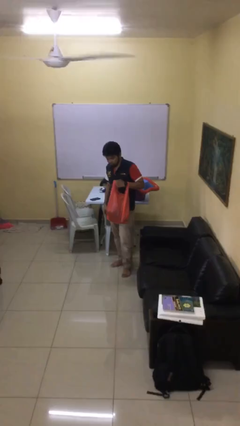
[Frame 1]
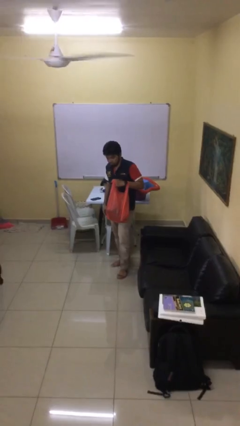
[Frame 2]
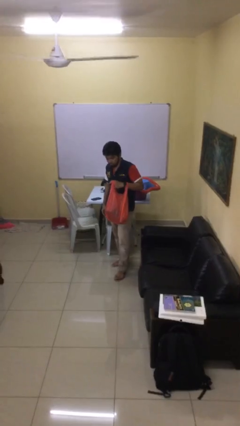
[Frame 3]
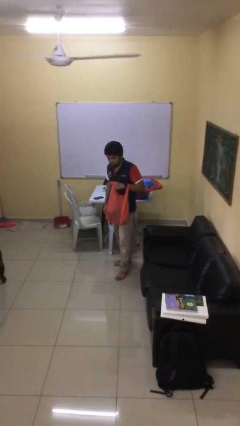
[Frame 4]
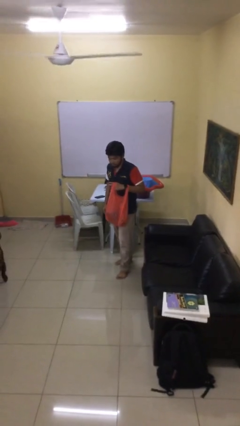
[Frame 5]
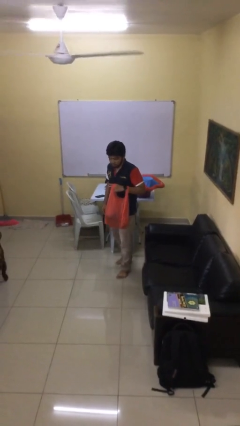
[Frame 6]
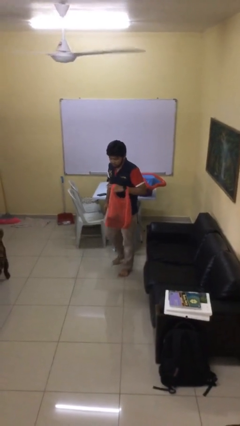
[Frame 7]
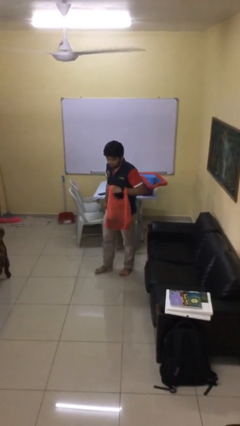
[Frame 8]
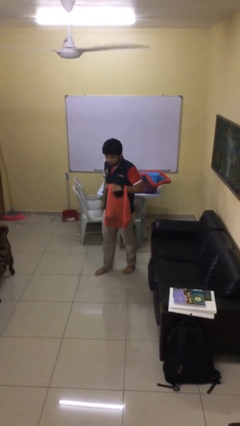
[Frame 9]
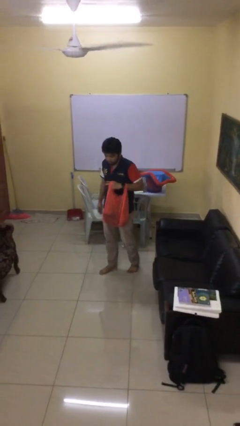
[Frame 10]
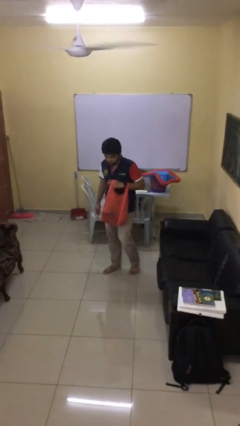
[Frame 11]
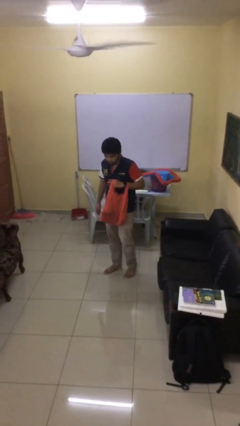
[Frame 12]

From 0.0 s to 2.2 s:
person carries groceries

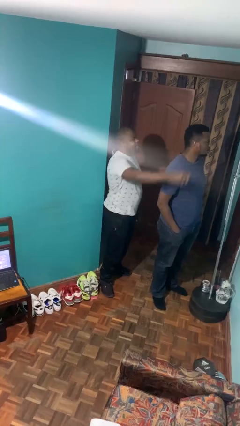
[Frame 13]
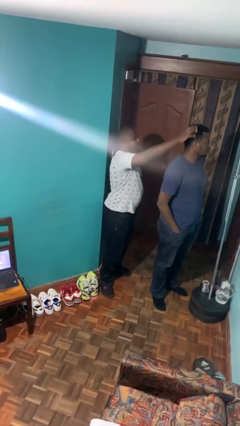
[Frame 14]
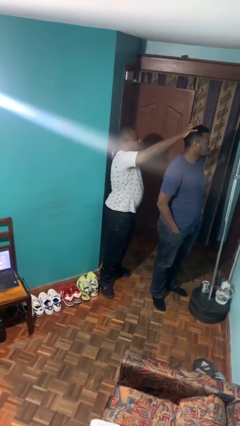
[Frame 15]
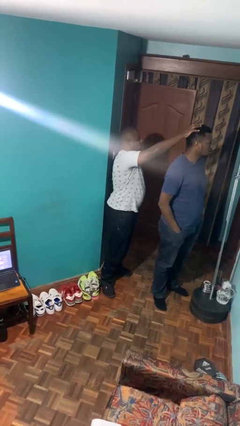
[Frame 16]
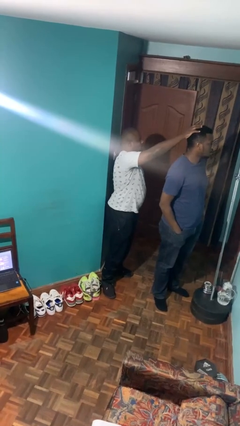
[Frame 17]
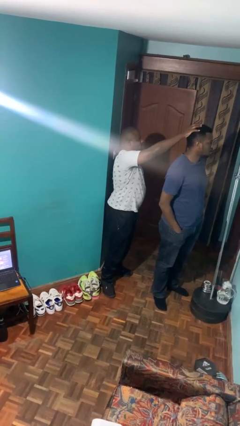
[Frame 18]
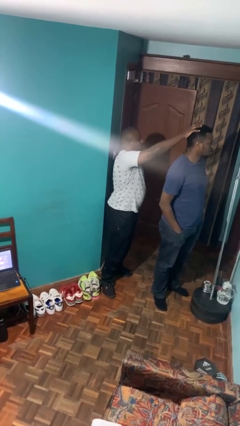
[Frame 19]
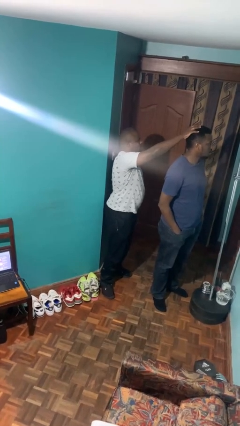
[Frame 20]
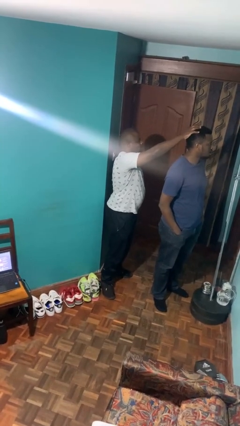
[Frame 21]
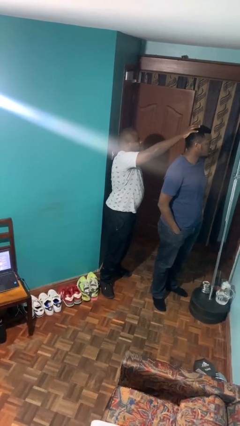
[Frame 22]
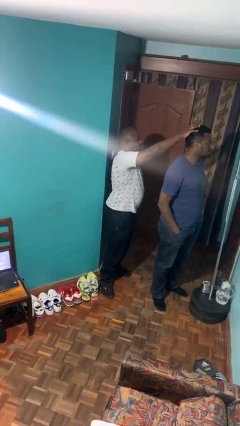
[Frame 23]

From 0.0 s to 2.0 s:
person grabs person by hair

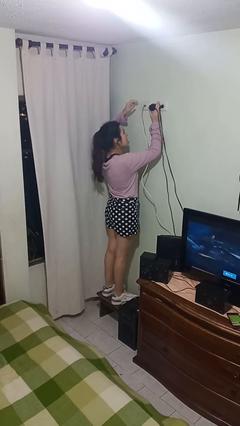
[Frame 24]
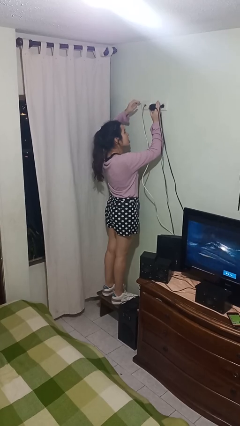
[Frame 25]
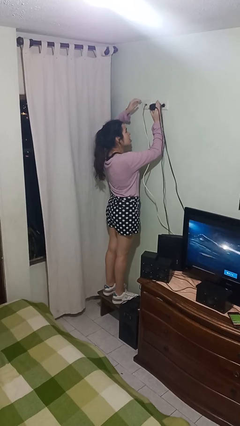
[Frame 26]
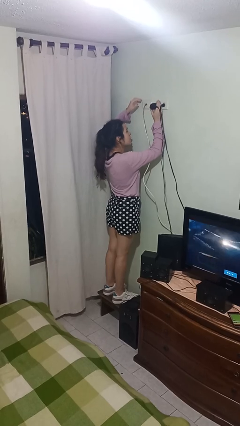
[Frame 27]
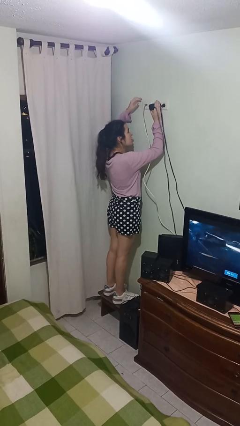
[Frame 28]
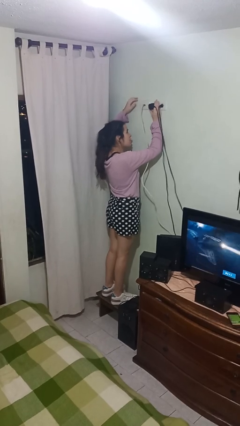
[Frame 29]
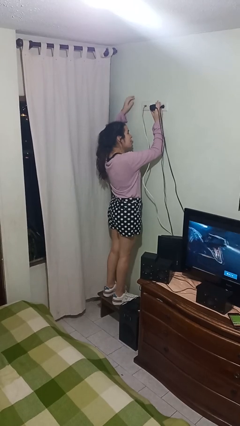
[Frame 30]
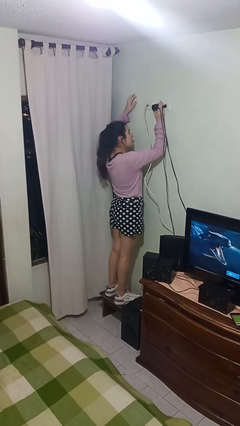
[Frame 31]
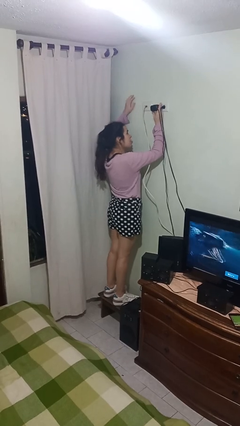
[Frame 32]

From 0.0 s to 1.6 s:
person plugs into electrical socket

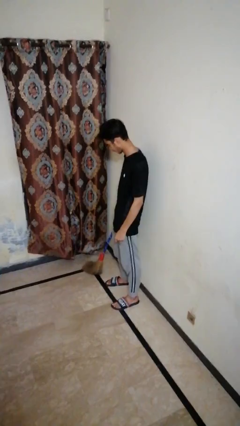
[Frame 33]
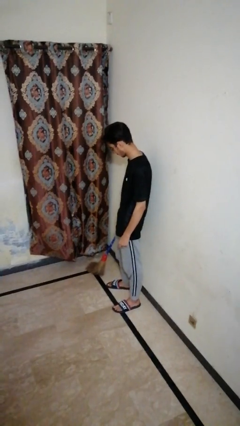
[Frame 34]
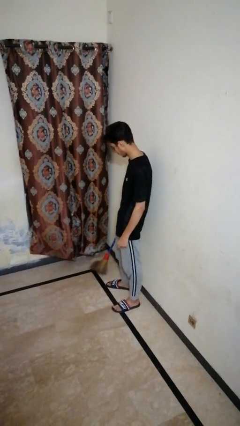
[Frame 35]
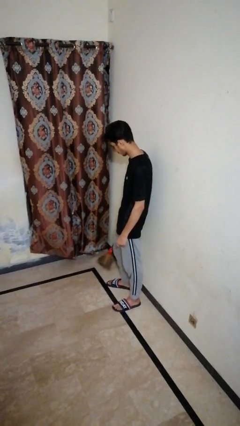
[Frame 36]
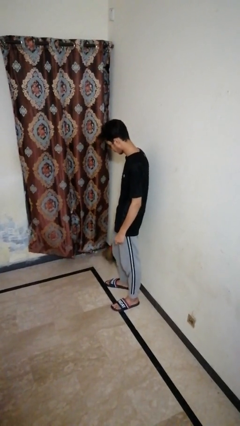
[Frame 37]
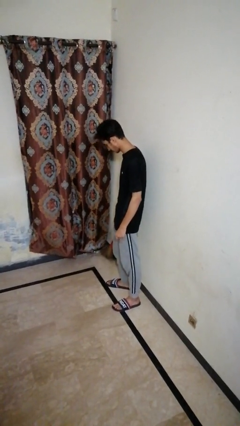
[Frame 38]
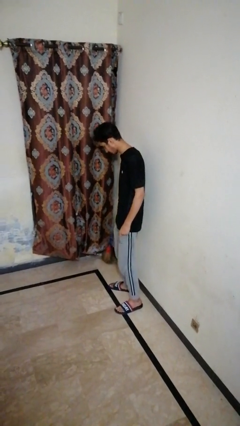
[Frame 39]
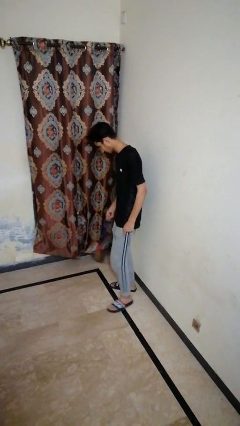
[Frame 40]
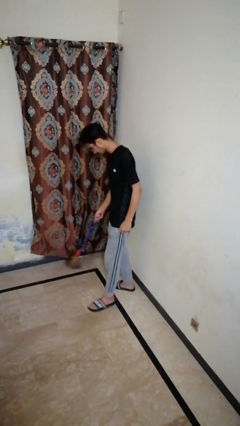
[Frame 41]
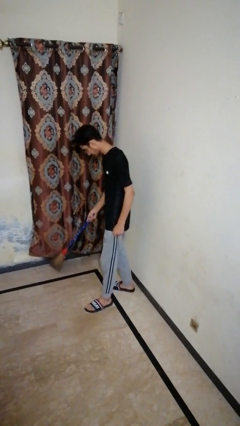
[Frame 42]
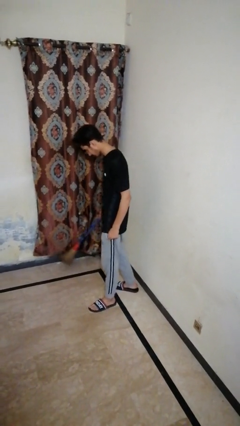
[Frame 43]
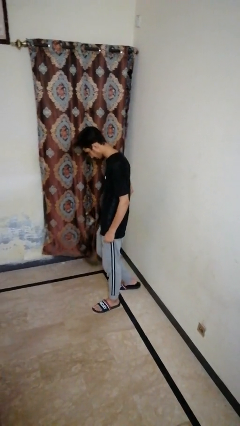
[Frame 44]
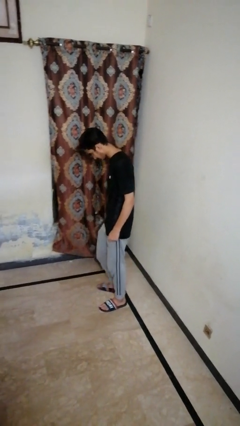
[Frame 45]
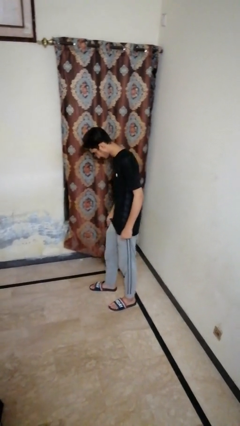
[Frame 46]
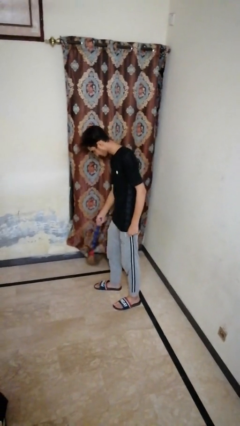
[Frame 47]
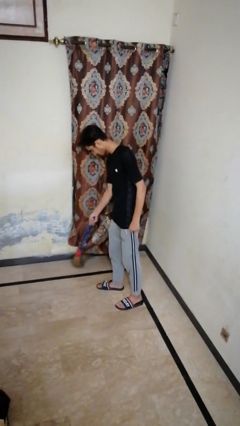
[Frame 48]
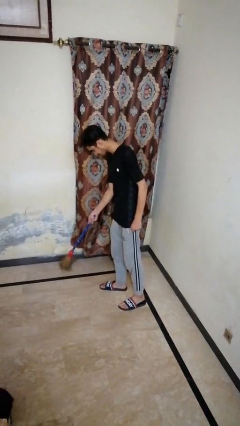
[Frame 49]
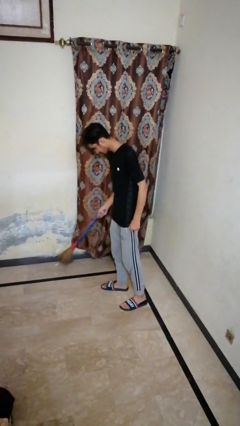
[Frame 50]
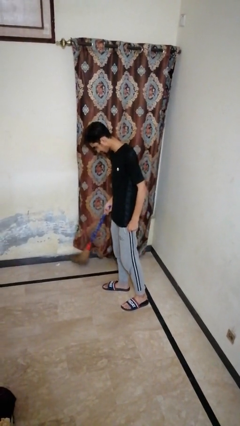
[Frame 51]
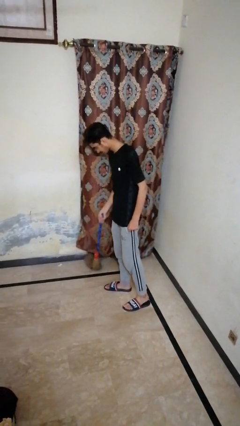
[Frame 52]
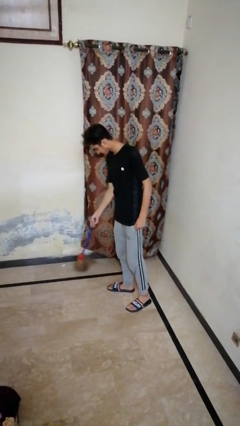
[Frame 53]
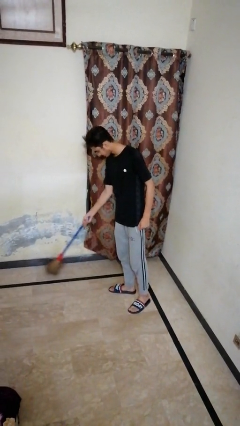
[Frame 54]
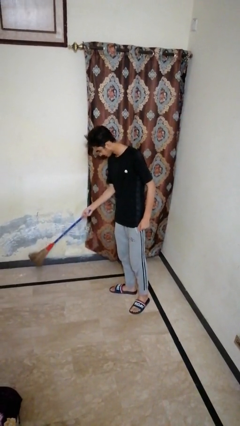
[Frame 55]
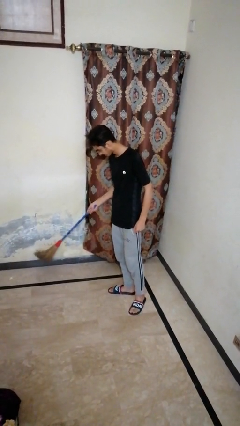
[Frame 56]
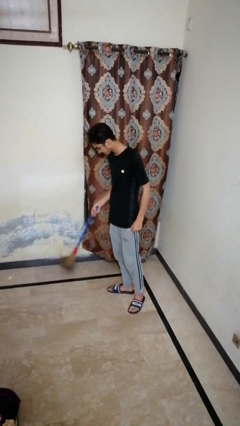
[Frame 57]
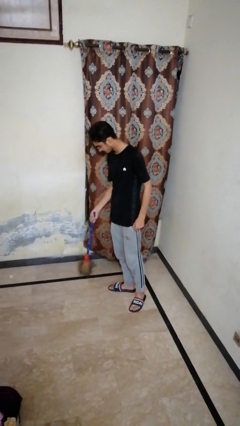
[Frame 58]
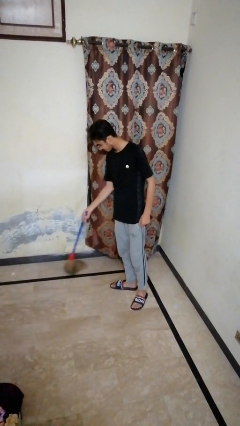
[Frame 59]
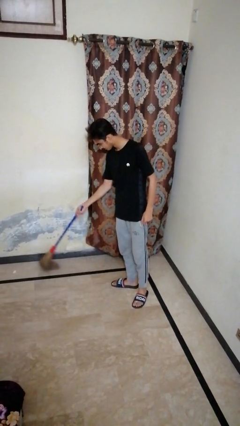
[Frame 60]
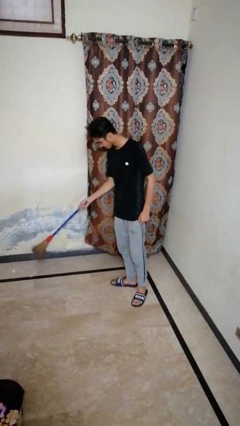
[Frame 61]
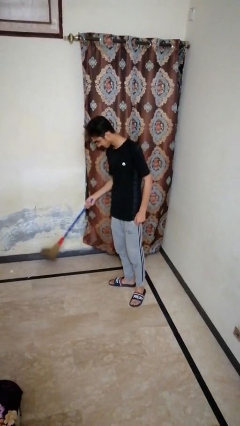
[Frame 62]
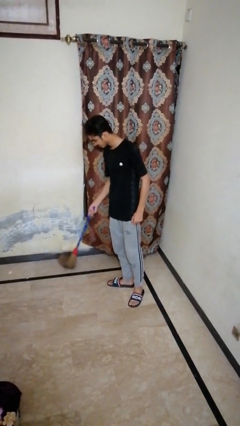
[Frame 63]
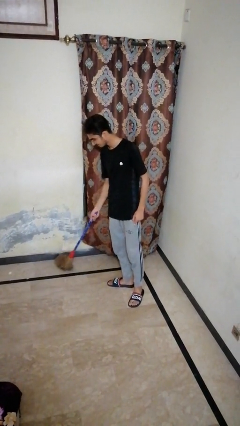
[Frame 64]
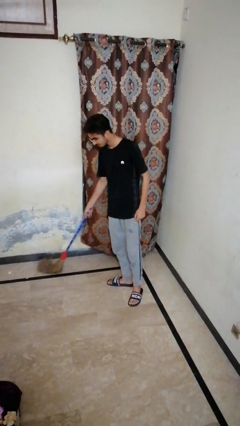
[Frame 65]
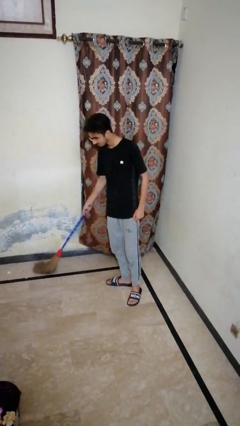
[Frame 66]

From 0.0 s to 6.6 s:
person sweeps floor

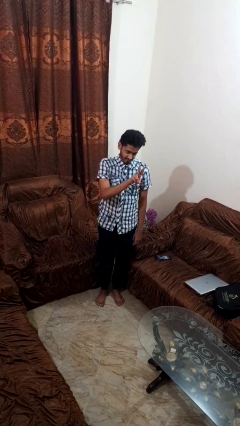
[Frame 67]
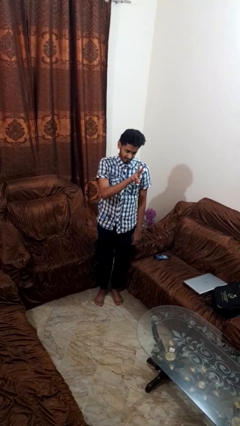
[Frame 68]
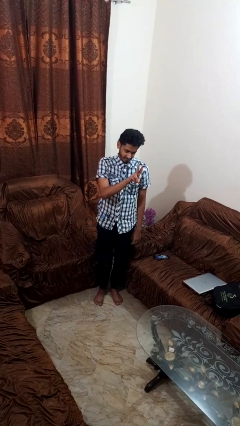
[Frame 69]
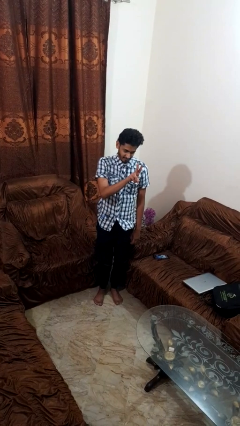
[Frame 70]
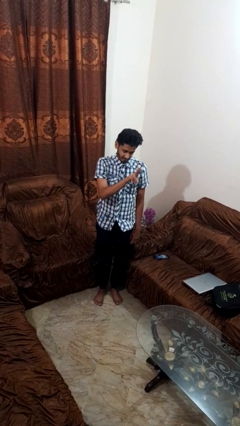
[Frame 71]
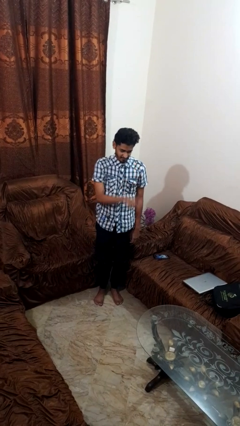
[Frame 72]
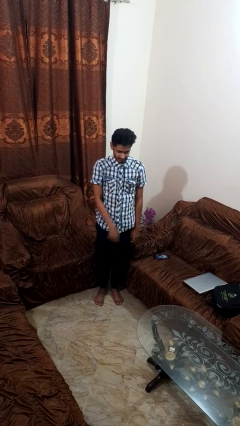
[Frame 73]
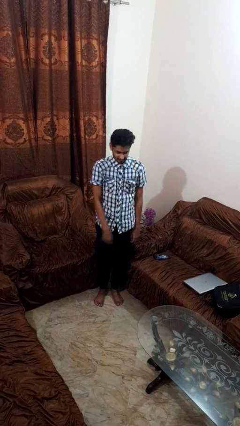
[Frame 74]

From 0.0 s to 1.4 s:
person gestures peace

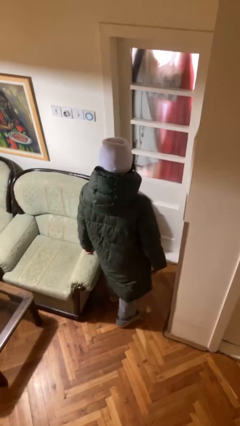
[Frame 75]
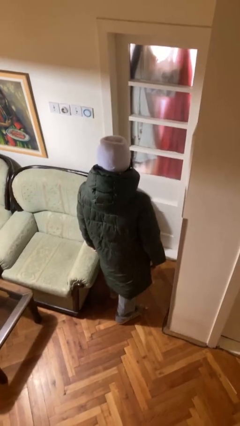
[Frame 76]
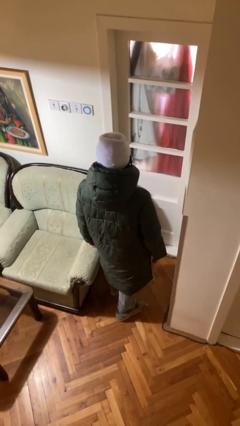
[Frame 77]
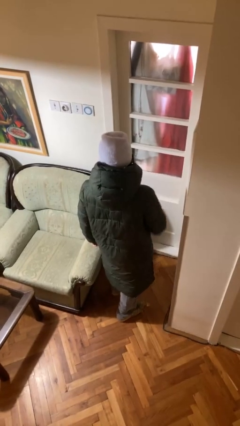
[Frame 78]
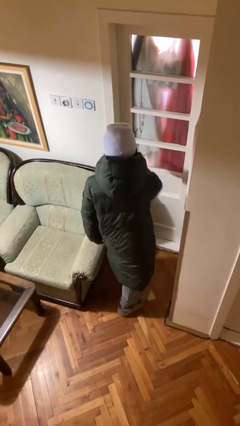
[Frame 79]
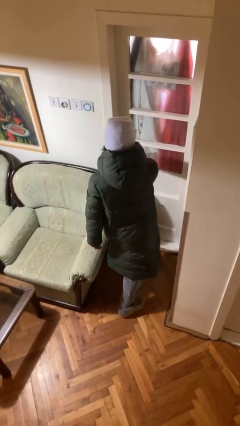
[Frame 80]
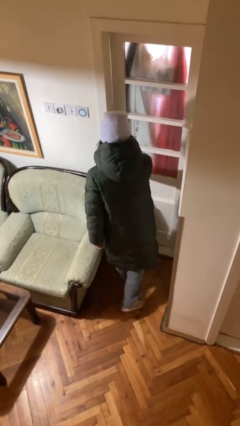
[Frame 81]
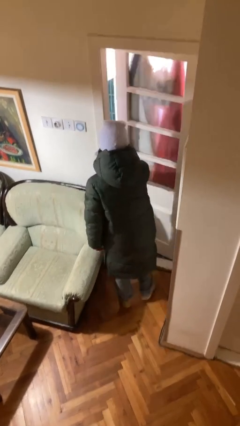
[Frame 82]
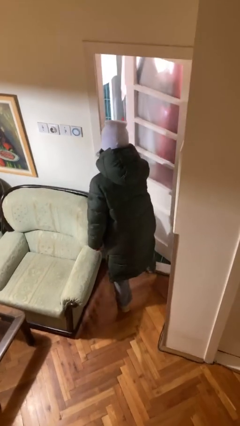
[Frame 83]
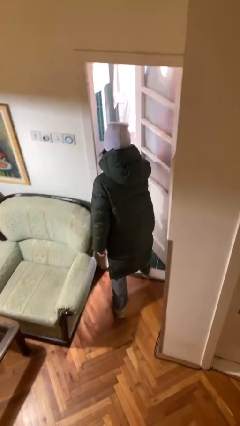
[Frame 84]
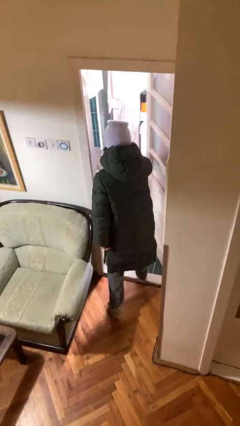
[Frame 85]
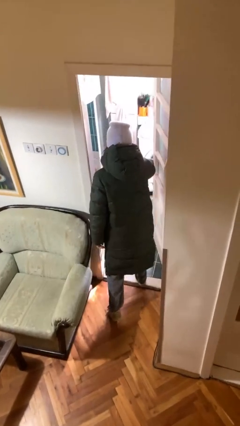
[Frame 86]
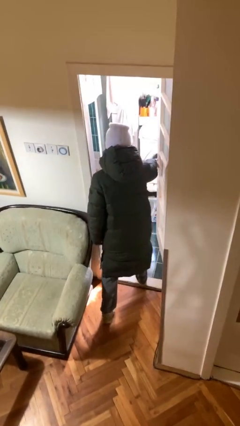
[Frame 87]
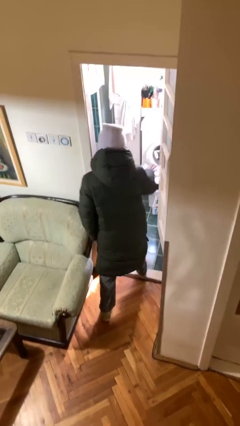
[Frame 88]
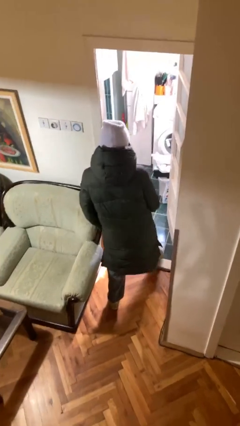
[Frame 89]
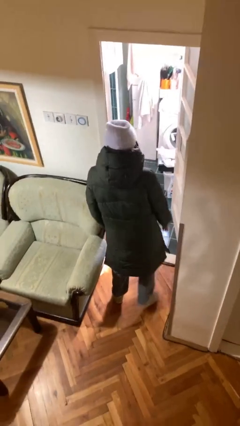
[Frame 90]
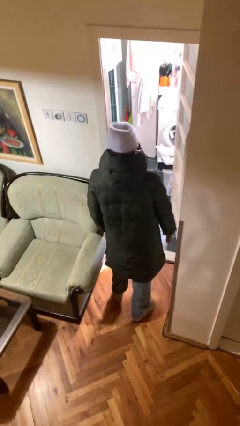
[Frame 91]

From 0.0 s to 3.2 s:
person opens facility door

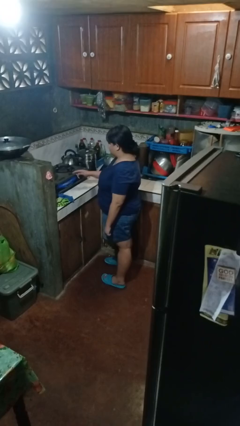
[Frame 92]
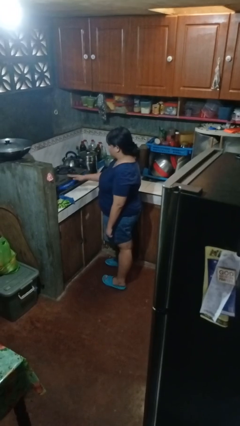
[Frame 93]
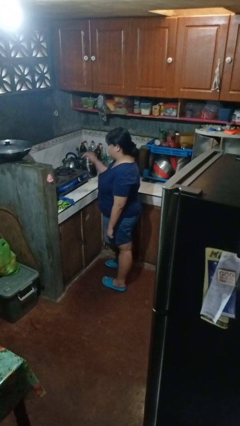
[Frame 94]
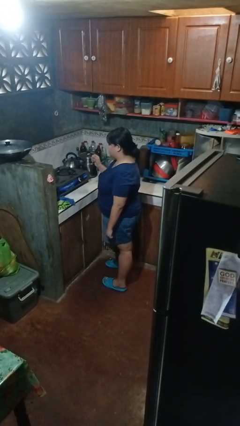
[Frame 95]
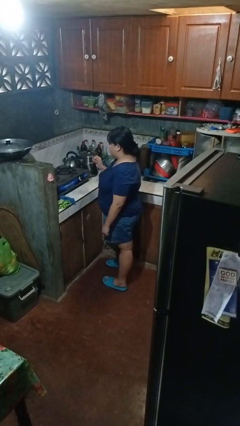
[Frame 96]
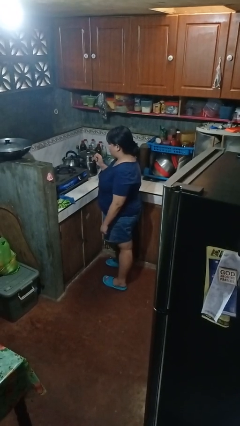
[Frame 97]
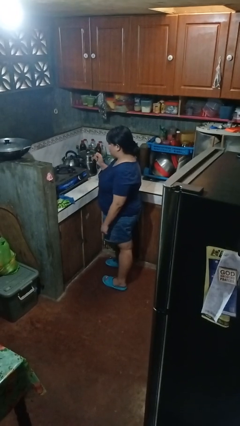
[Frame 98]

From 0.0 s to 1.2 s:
person burns hand
